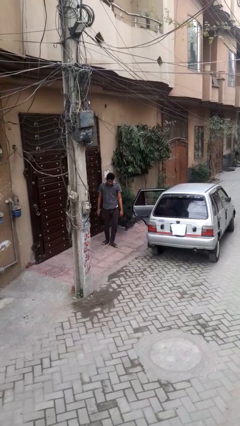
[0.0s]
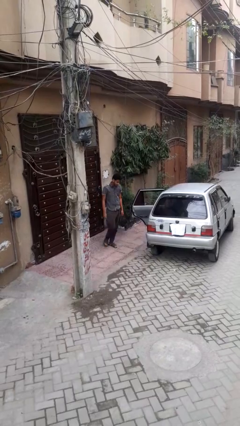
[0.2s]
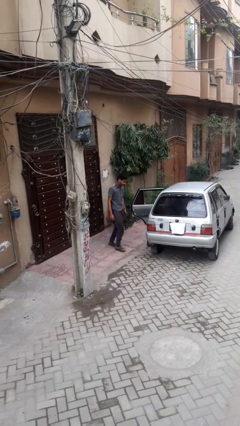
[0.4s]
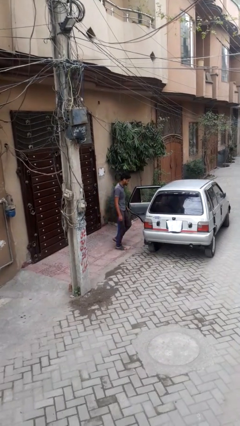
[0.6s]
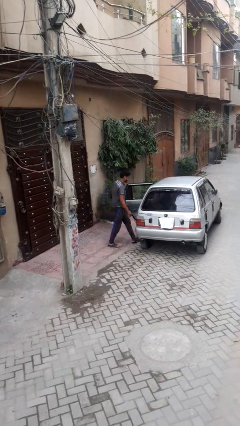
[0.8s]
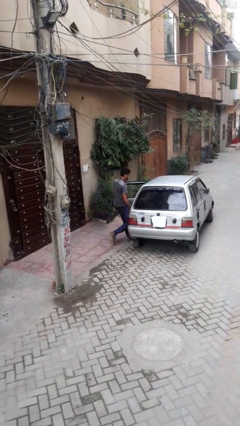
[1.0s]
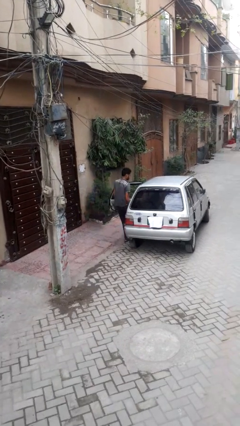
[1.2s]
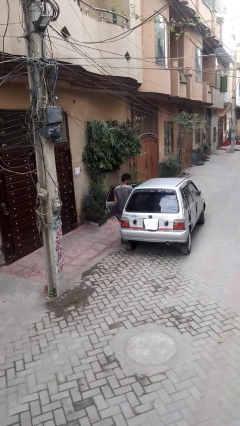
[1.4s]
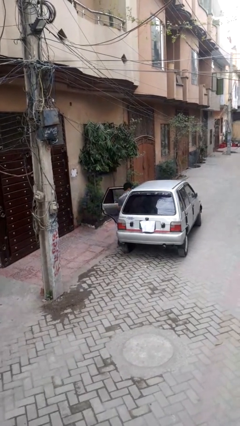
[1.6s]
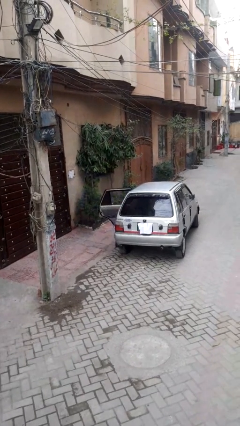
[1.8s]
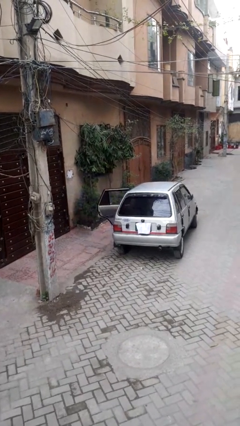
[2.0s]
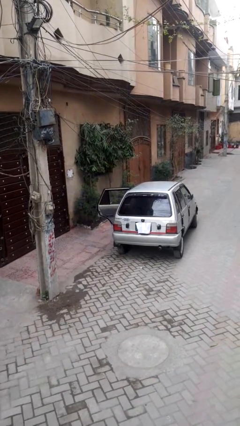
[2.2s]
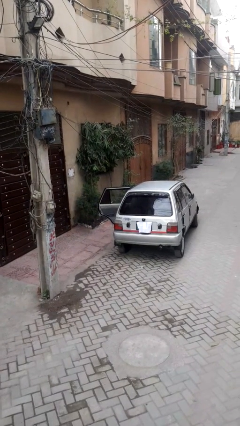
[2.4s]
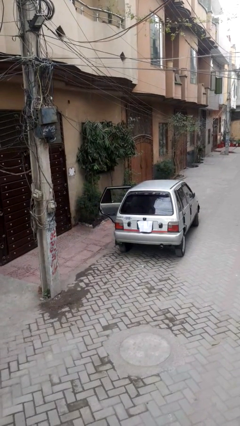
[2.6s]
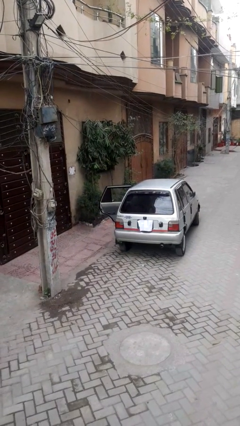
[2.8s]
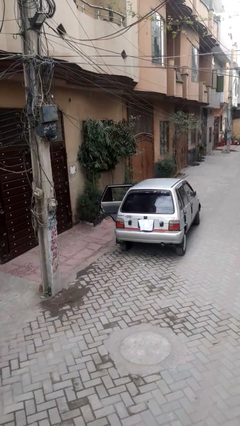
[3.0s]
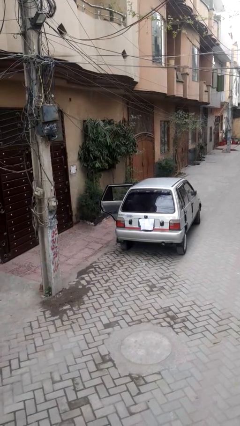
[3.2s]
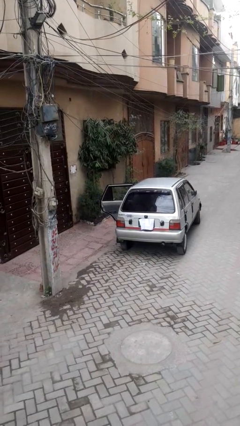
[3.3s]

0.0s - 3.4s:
person enters car

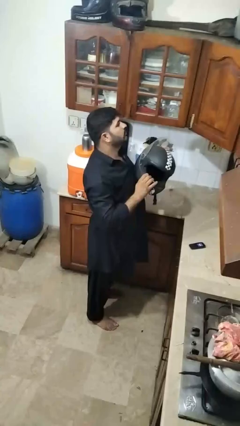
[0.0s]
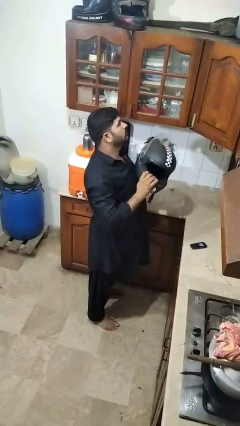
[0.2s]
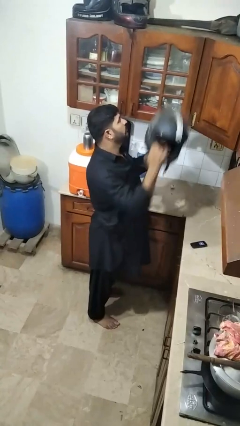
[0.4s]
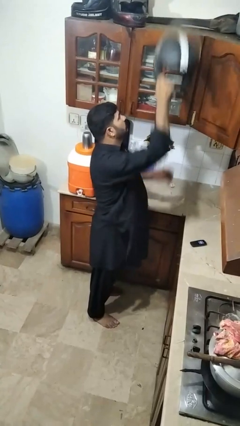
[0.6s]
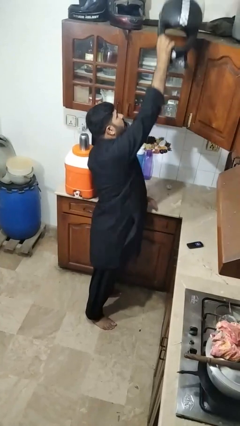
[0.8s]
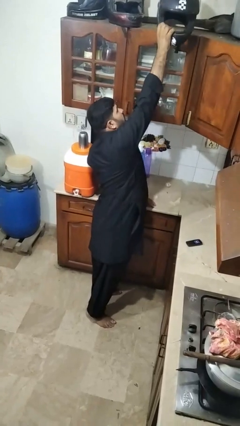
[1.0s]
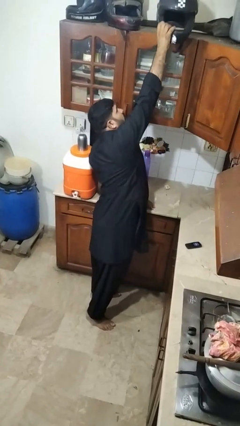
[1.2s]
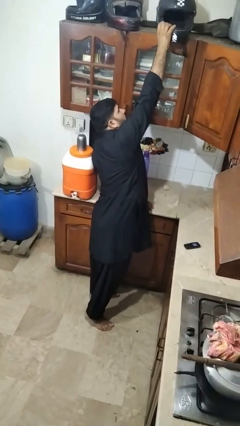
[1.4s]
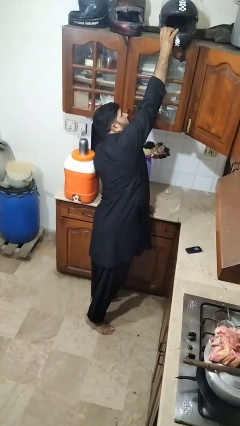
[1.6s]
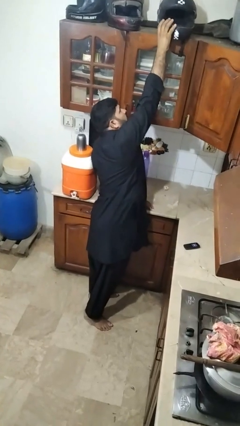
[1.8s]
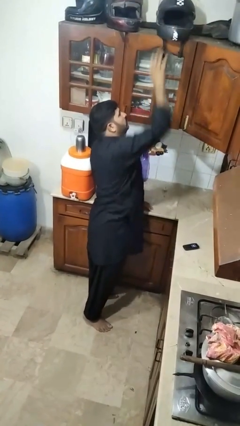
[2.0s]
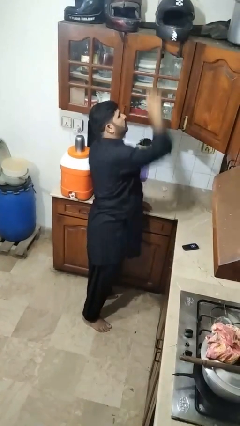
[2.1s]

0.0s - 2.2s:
person puts down object on shelf

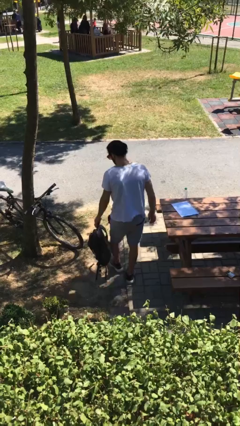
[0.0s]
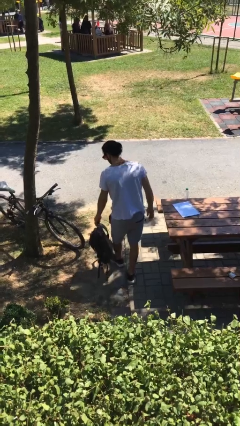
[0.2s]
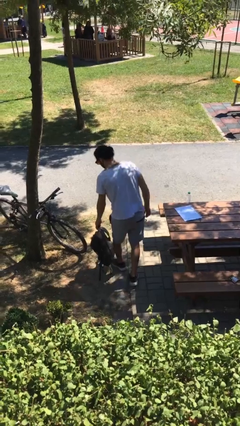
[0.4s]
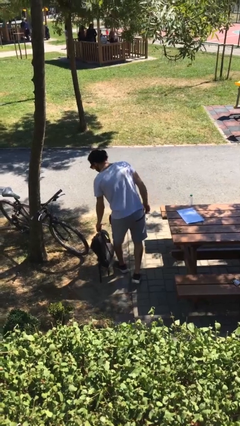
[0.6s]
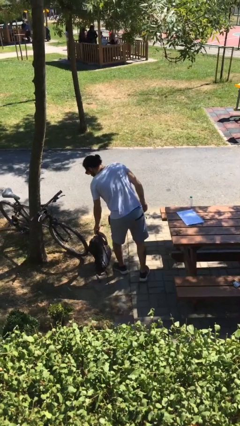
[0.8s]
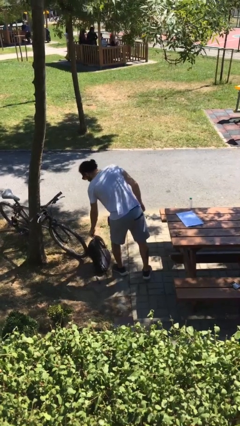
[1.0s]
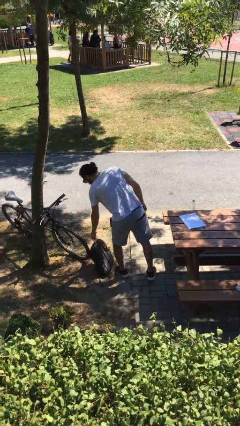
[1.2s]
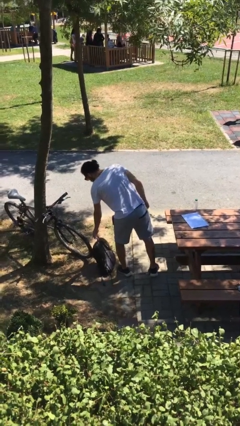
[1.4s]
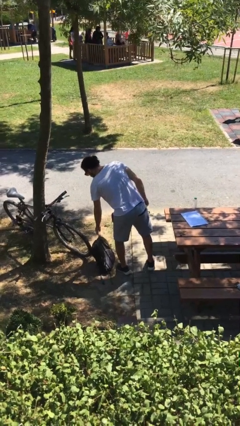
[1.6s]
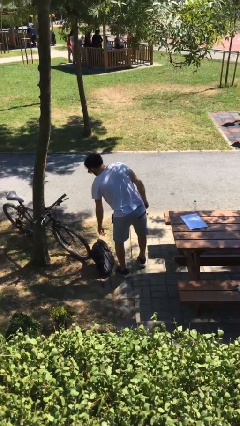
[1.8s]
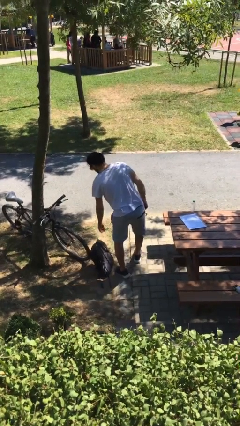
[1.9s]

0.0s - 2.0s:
person puts down object on floor

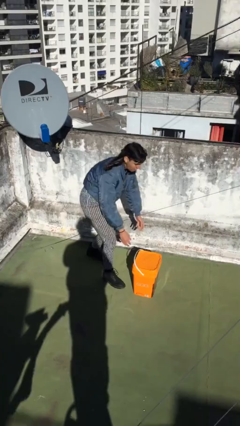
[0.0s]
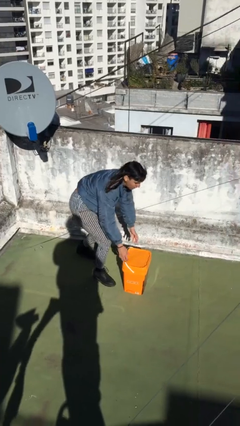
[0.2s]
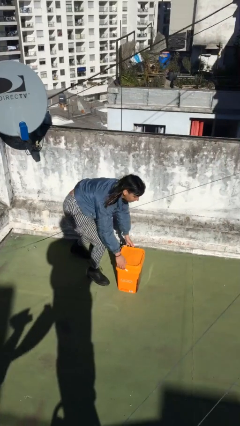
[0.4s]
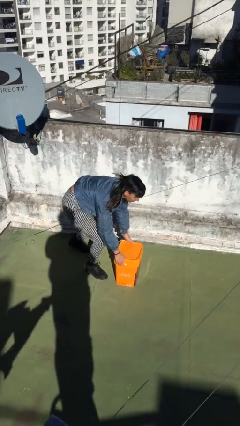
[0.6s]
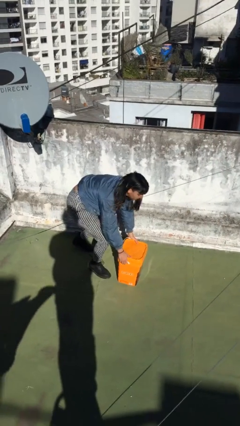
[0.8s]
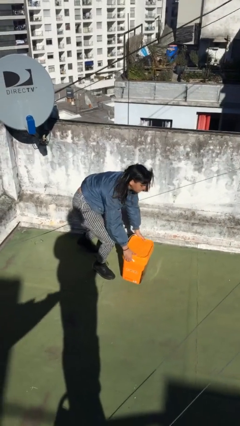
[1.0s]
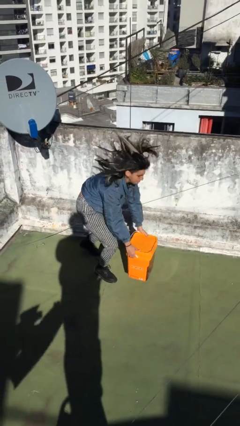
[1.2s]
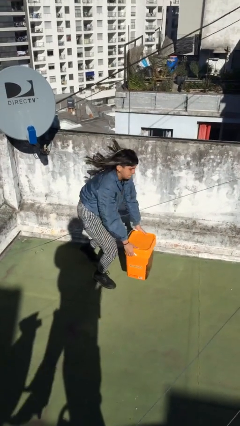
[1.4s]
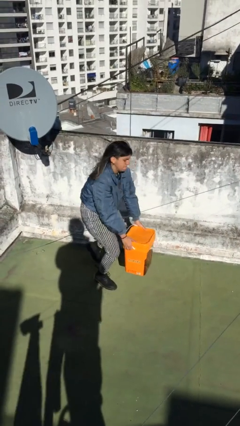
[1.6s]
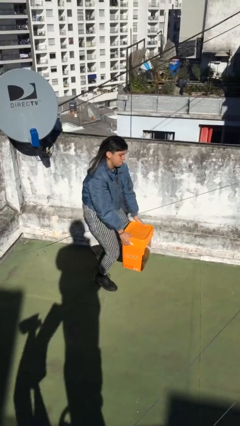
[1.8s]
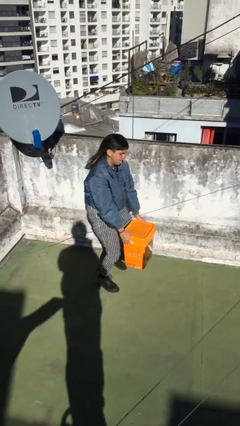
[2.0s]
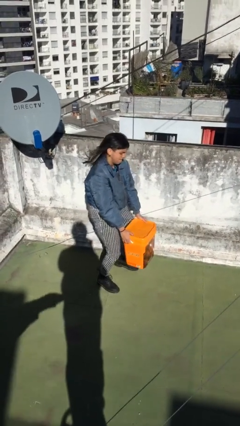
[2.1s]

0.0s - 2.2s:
person picks up object from floor

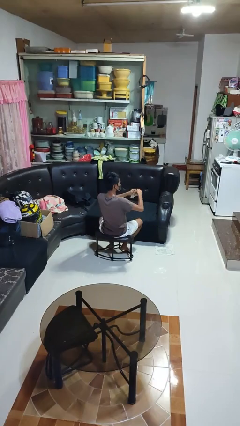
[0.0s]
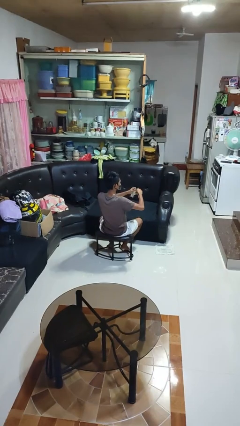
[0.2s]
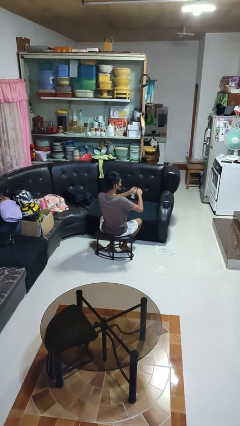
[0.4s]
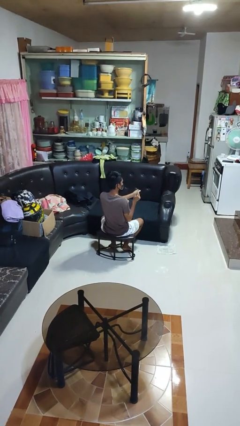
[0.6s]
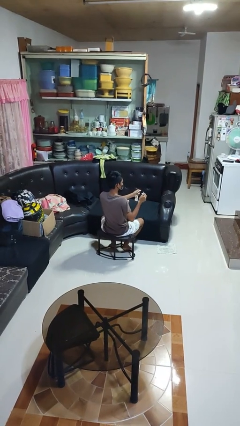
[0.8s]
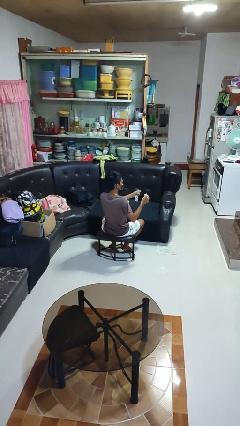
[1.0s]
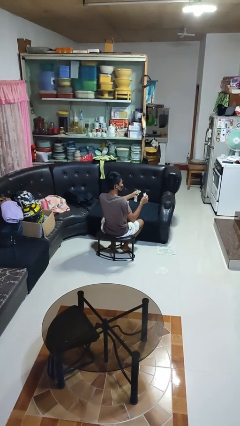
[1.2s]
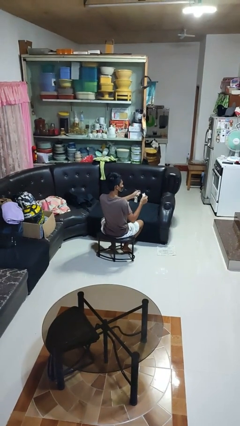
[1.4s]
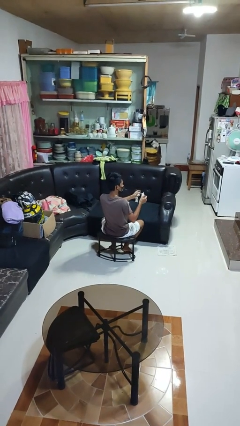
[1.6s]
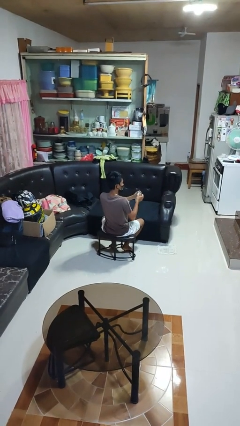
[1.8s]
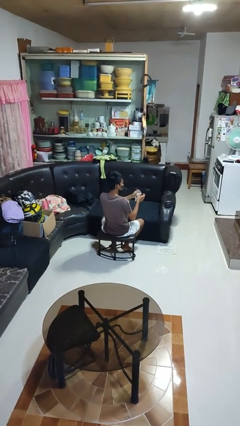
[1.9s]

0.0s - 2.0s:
person tears paper

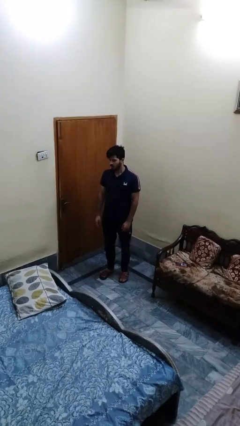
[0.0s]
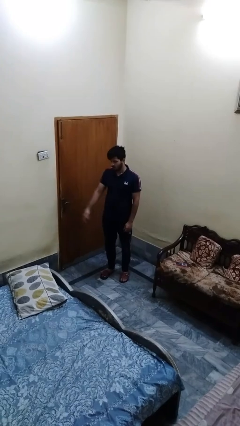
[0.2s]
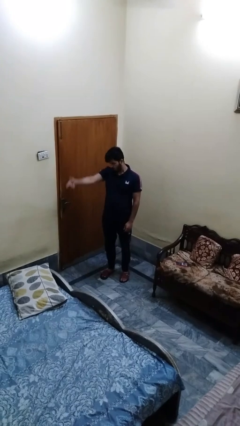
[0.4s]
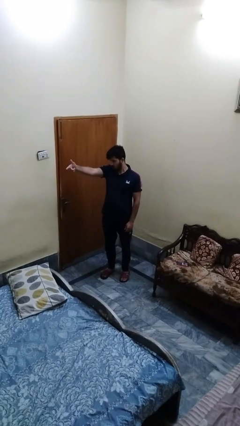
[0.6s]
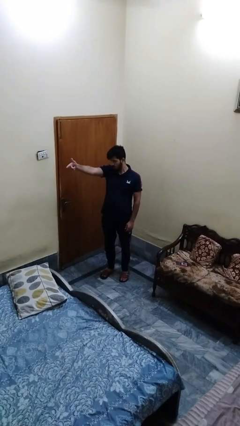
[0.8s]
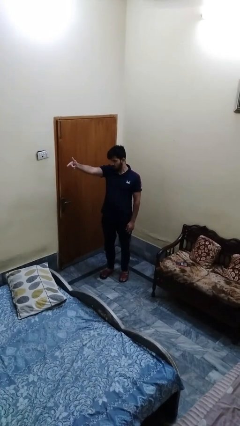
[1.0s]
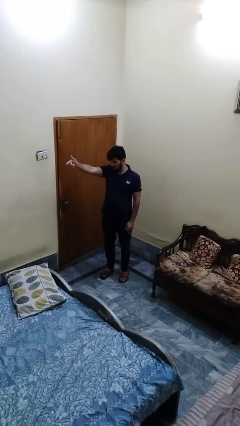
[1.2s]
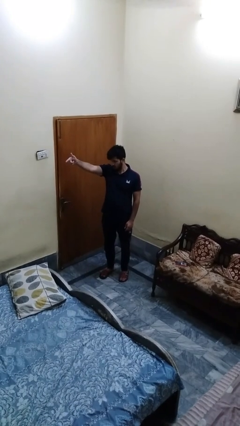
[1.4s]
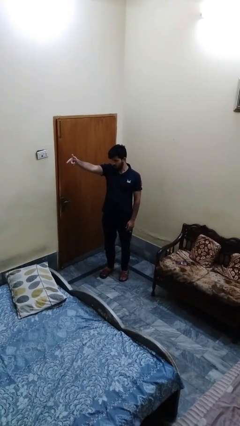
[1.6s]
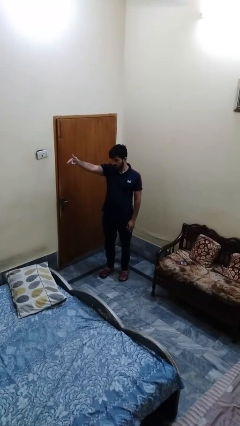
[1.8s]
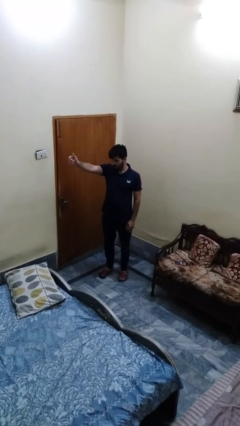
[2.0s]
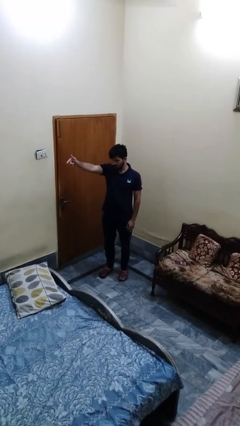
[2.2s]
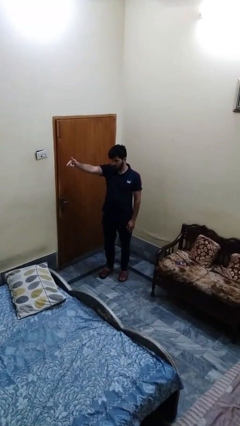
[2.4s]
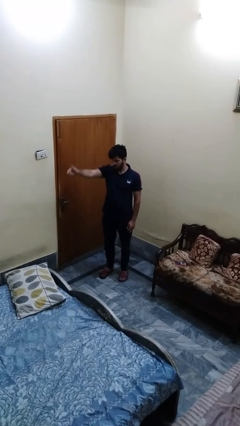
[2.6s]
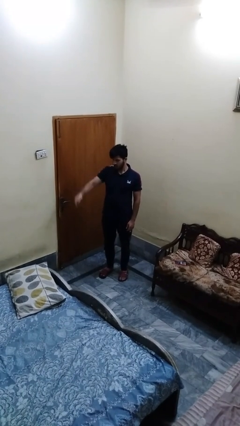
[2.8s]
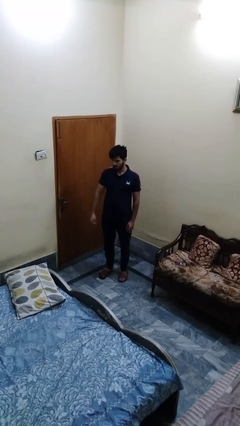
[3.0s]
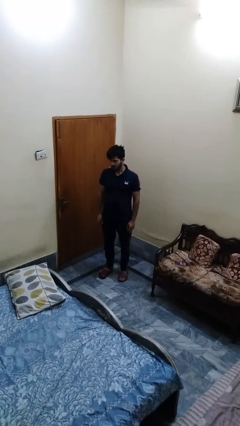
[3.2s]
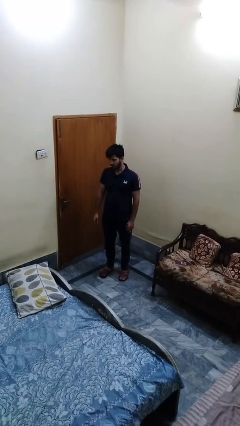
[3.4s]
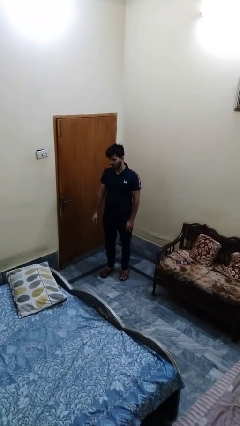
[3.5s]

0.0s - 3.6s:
person points at person

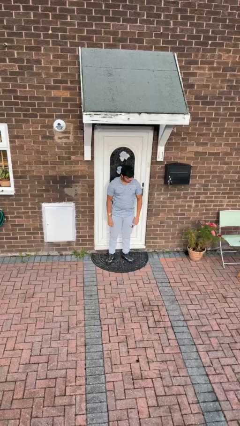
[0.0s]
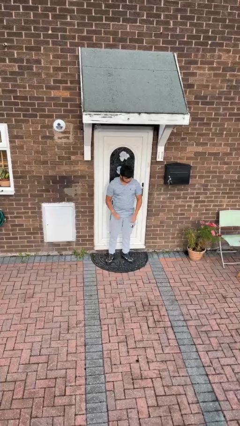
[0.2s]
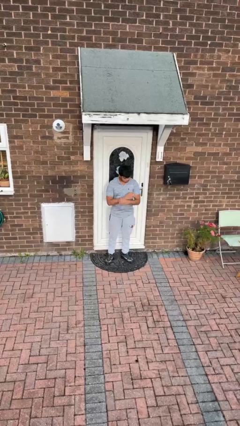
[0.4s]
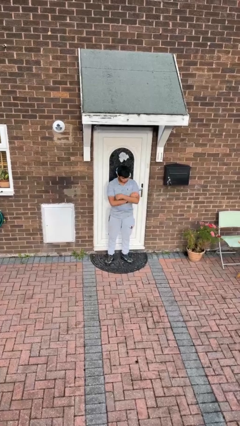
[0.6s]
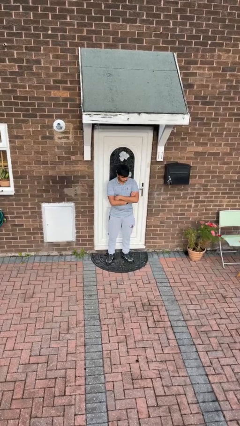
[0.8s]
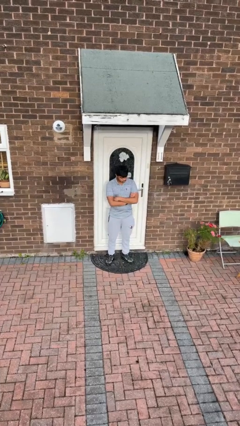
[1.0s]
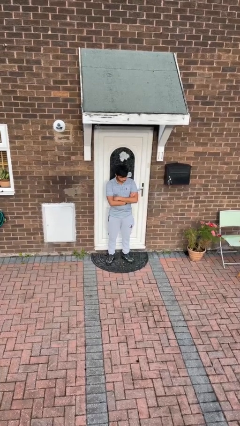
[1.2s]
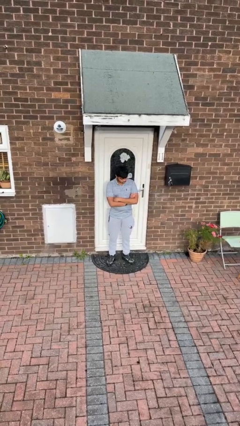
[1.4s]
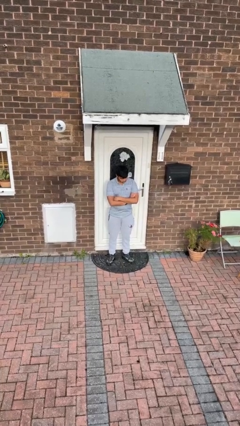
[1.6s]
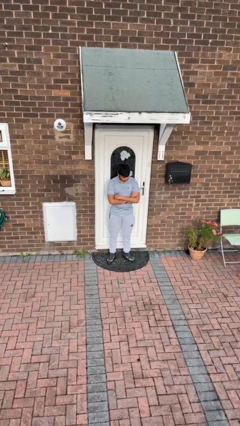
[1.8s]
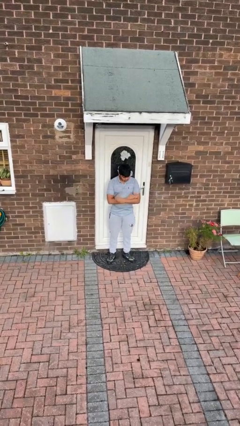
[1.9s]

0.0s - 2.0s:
person crosses arms
